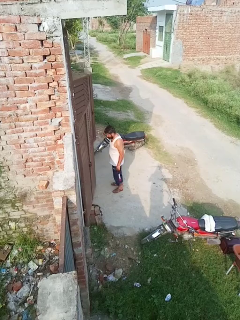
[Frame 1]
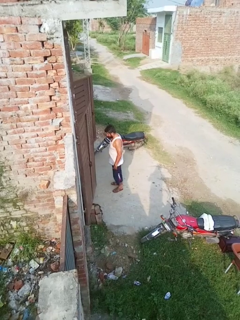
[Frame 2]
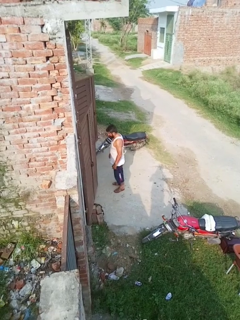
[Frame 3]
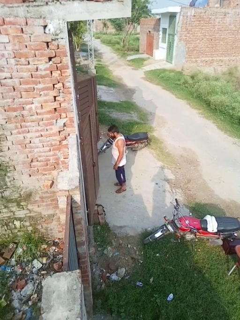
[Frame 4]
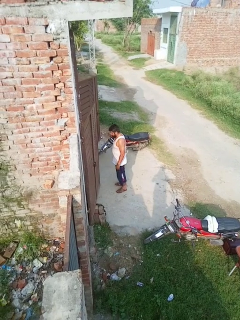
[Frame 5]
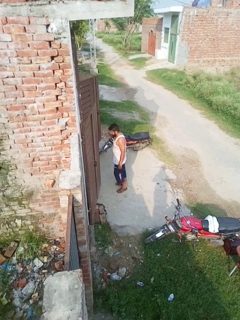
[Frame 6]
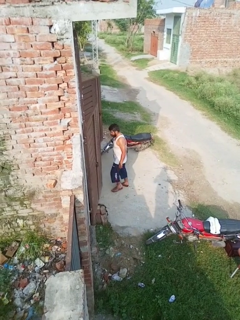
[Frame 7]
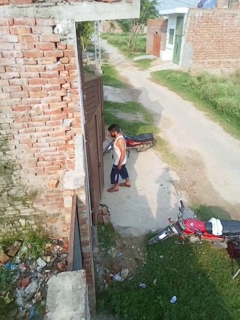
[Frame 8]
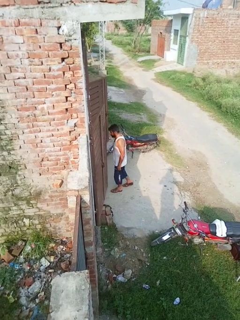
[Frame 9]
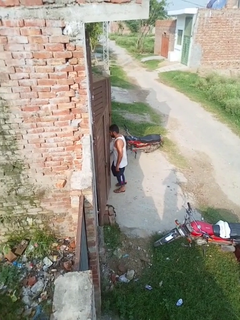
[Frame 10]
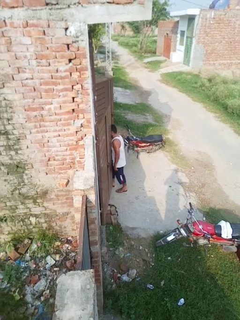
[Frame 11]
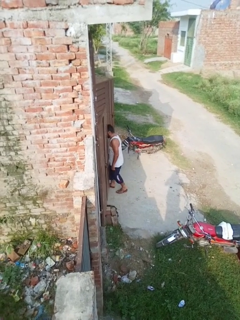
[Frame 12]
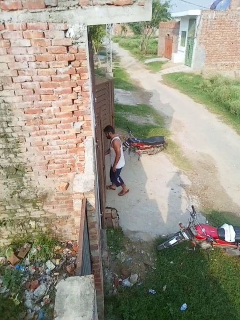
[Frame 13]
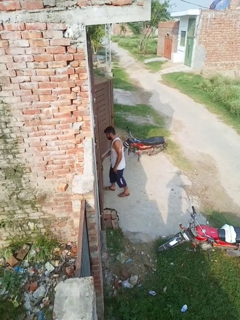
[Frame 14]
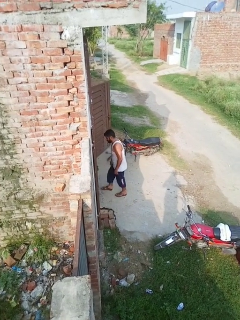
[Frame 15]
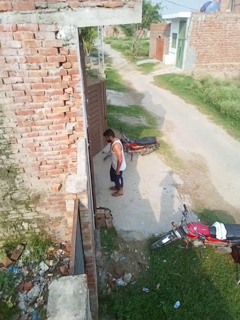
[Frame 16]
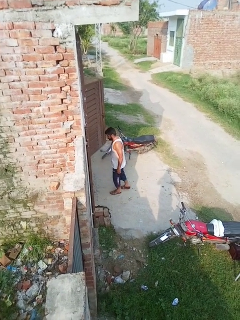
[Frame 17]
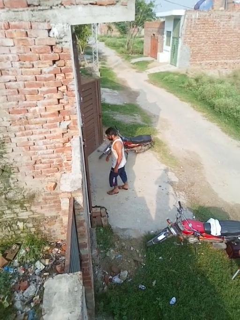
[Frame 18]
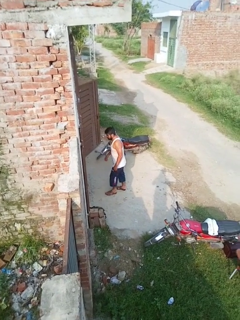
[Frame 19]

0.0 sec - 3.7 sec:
person bumps into wall

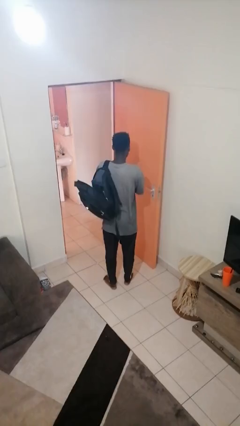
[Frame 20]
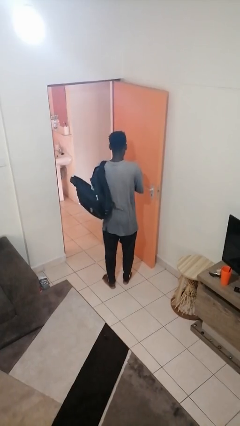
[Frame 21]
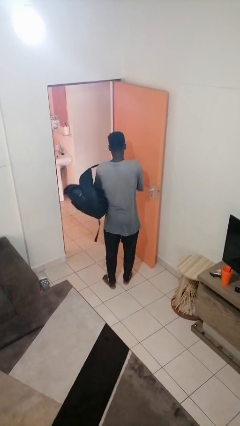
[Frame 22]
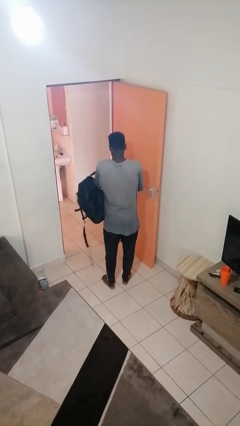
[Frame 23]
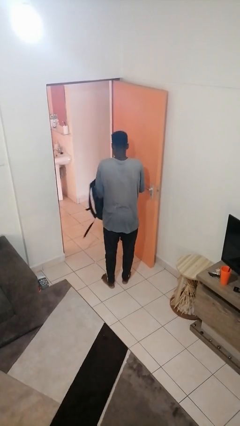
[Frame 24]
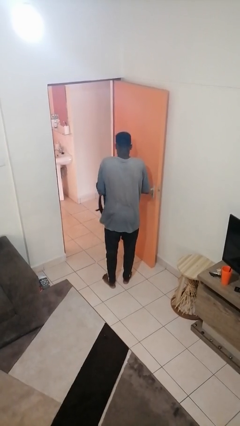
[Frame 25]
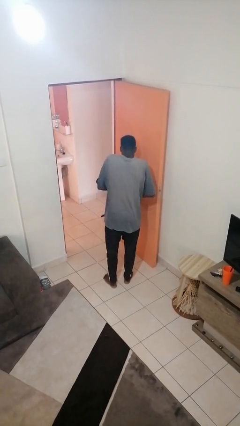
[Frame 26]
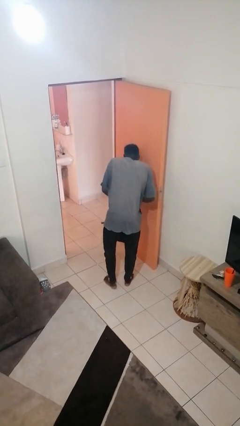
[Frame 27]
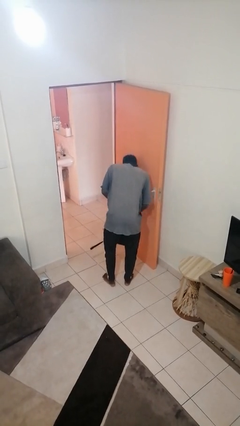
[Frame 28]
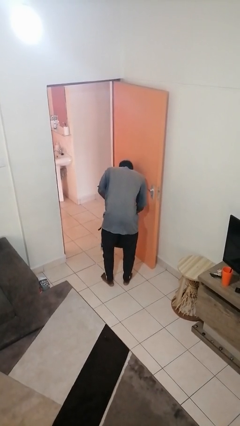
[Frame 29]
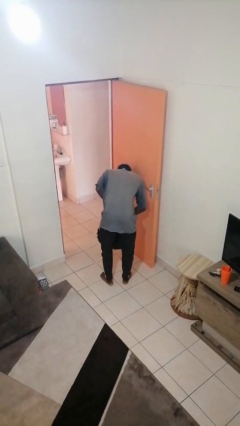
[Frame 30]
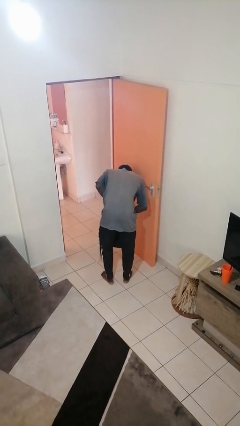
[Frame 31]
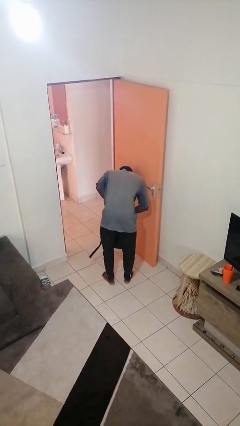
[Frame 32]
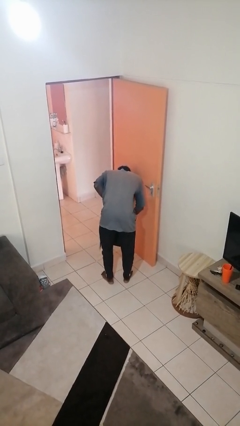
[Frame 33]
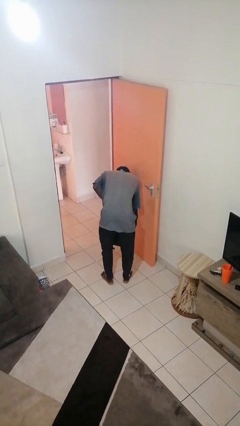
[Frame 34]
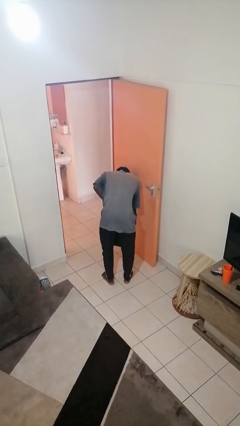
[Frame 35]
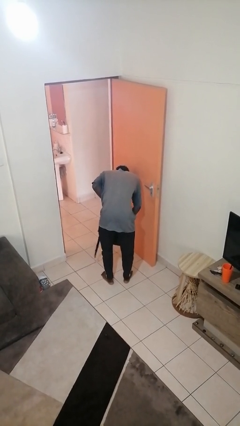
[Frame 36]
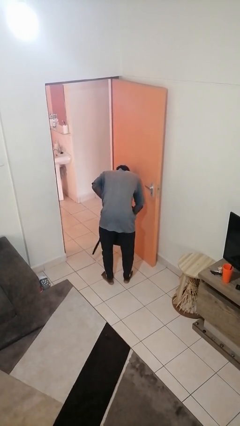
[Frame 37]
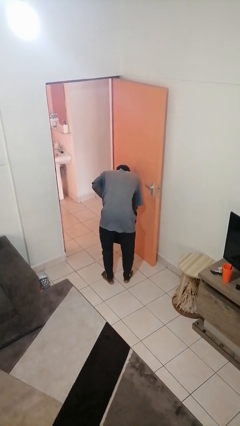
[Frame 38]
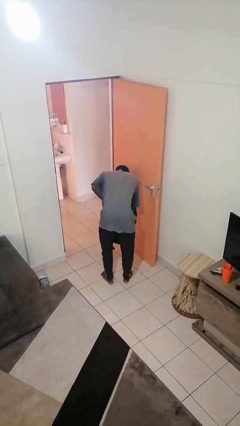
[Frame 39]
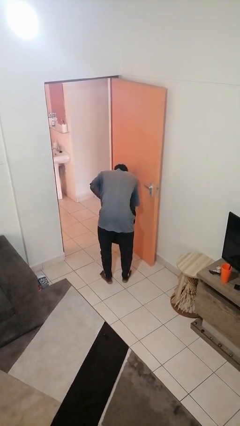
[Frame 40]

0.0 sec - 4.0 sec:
person searches in backpack

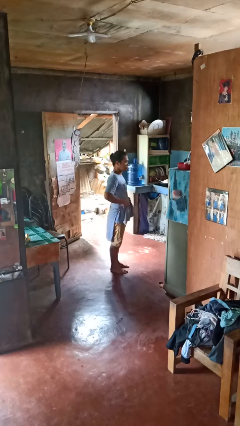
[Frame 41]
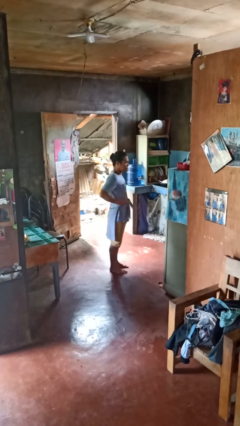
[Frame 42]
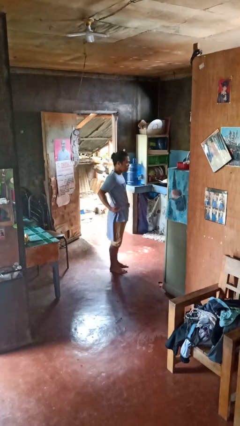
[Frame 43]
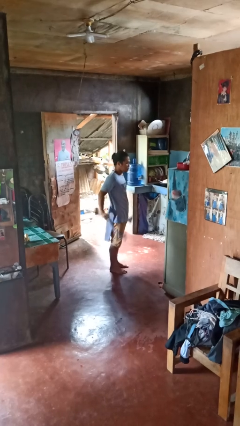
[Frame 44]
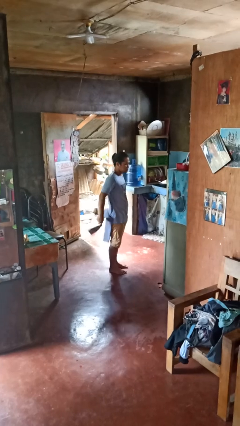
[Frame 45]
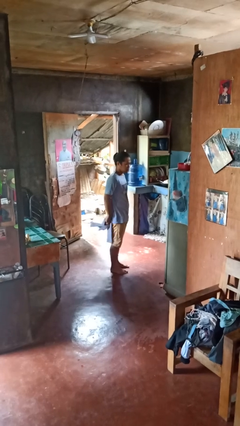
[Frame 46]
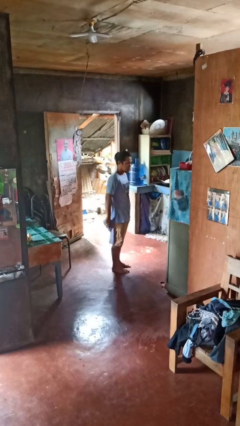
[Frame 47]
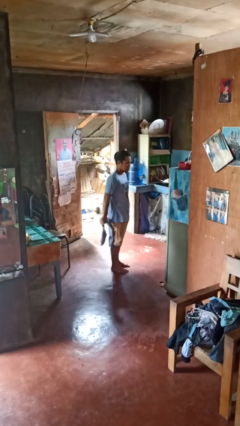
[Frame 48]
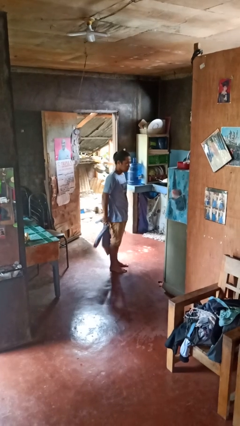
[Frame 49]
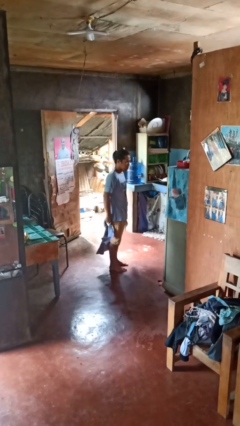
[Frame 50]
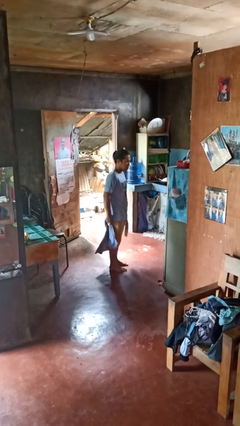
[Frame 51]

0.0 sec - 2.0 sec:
person unties jacket around waist

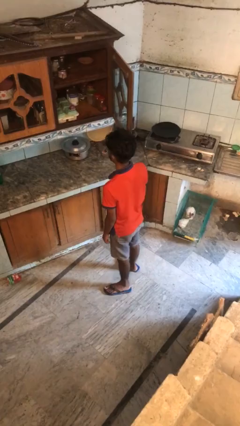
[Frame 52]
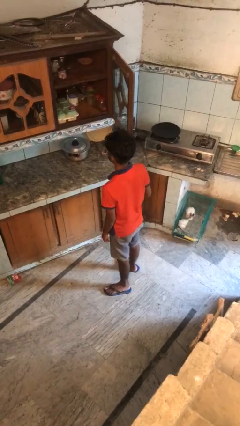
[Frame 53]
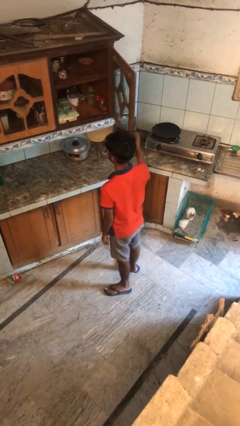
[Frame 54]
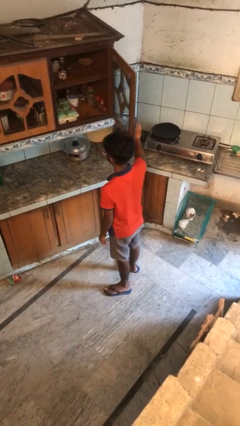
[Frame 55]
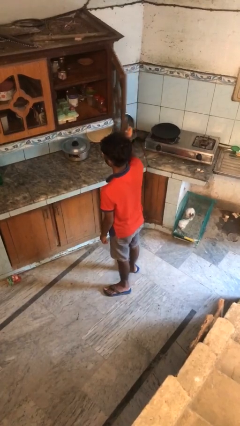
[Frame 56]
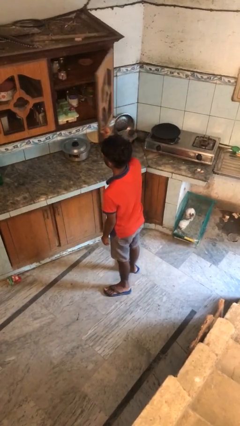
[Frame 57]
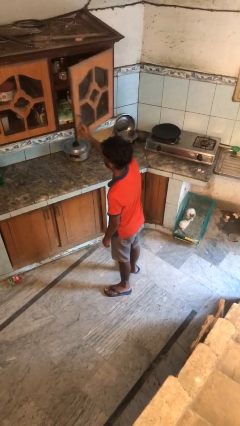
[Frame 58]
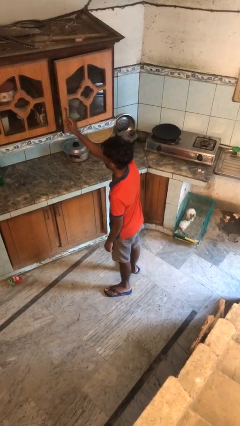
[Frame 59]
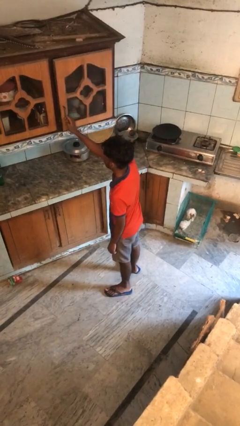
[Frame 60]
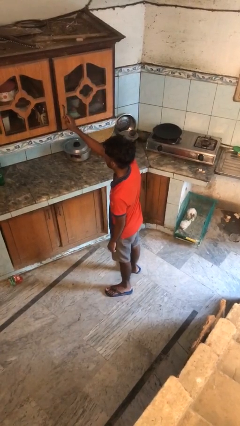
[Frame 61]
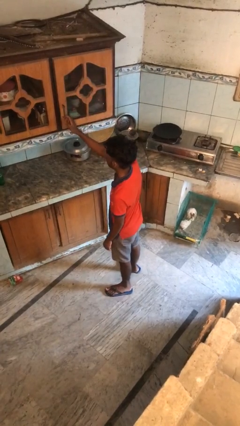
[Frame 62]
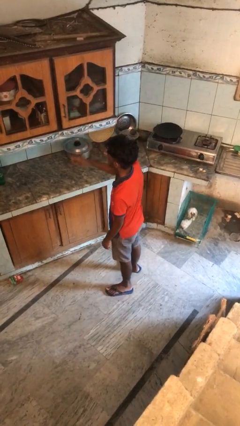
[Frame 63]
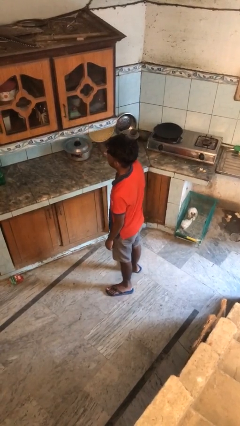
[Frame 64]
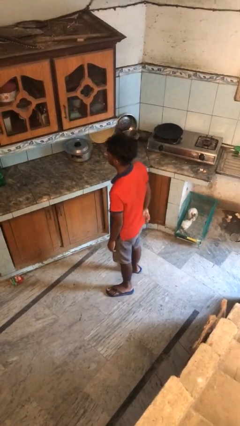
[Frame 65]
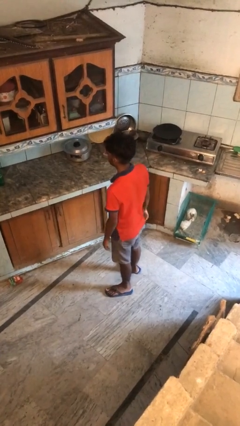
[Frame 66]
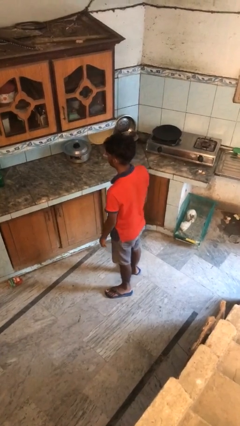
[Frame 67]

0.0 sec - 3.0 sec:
person closes cabinet

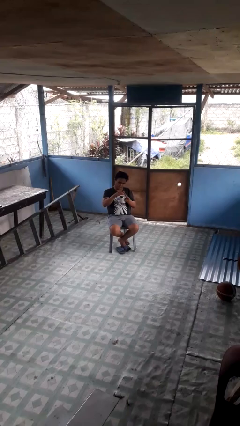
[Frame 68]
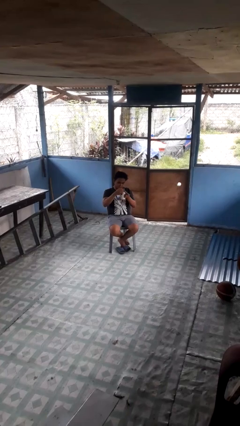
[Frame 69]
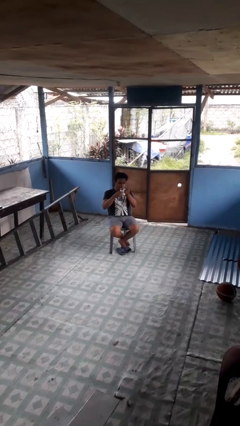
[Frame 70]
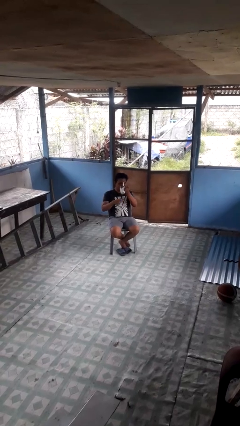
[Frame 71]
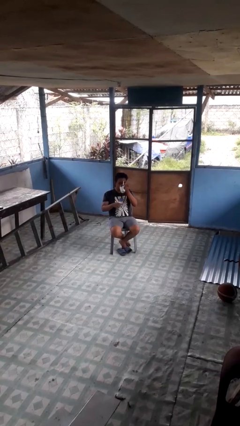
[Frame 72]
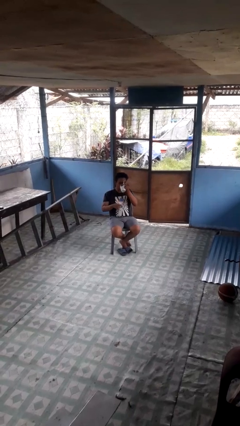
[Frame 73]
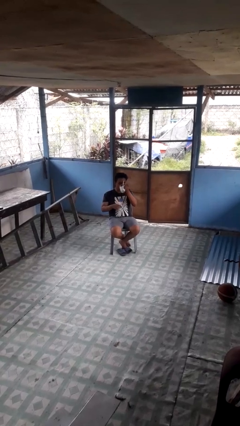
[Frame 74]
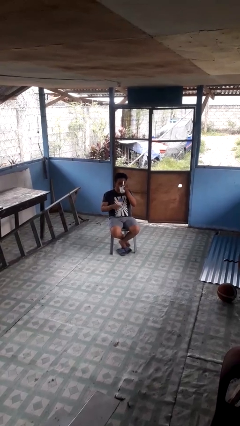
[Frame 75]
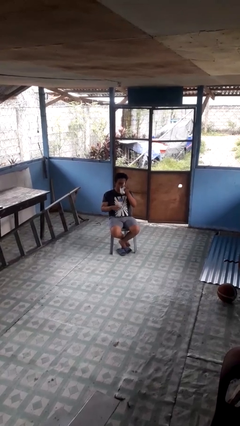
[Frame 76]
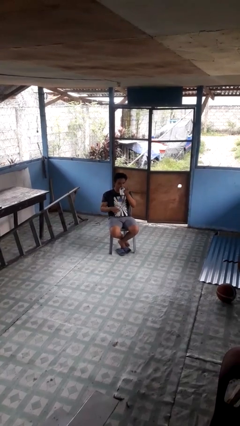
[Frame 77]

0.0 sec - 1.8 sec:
person drinks from mug

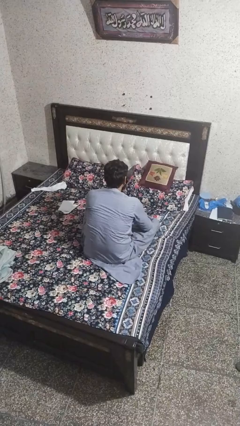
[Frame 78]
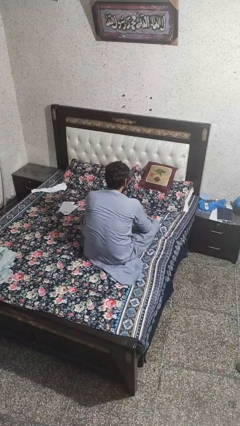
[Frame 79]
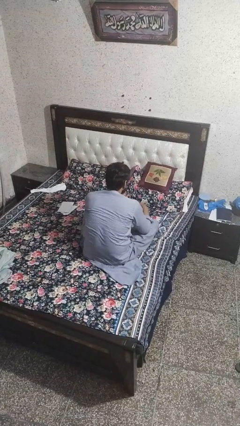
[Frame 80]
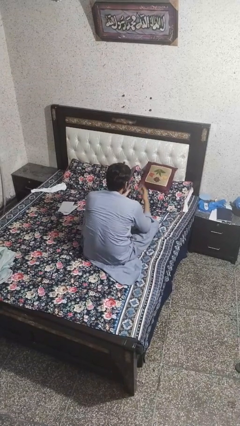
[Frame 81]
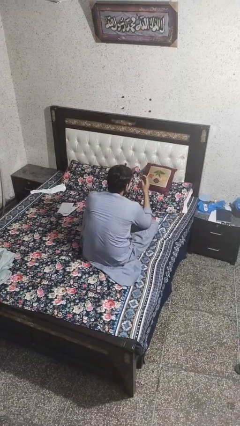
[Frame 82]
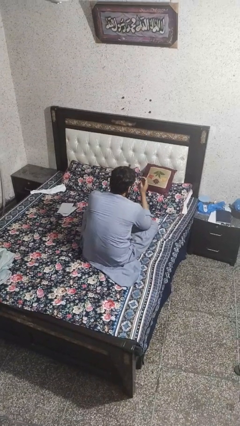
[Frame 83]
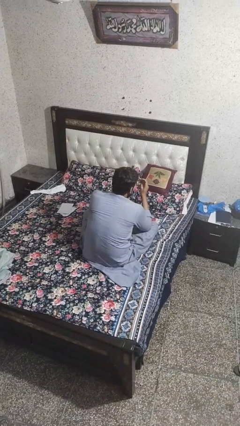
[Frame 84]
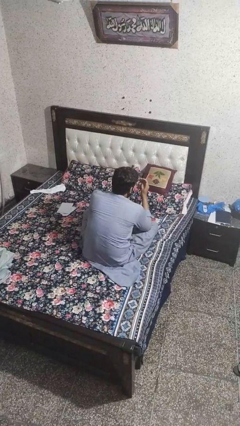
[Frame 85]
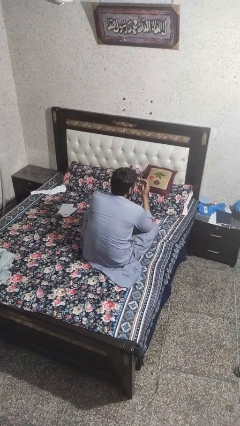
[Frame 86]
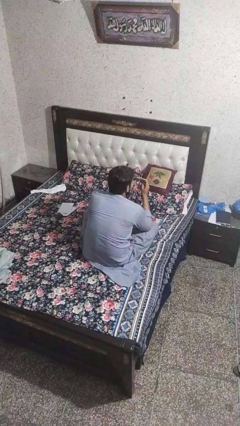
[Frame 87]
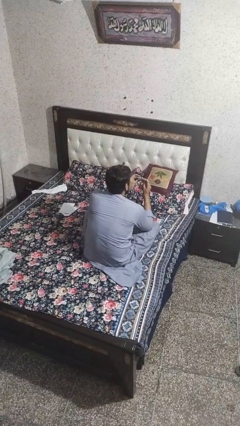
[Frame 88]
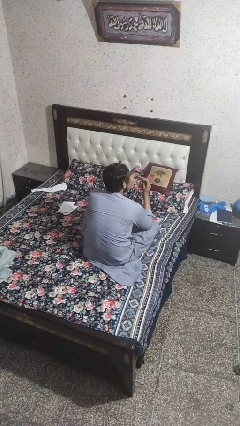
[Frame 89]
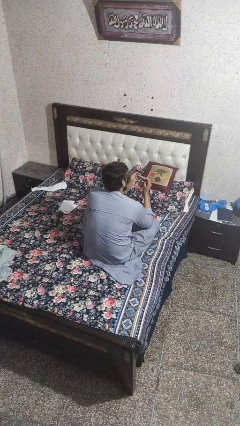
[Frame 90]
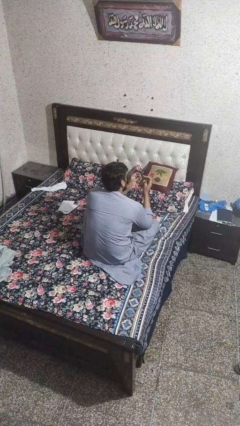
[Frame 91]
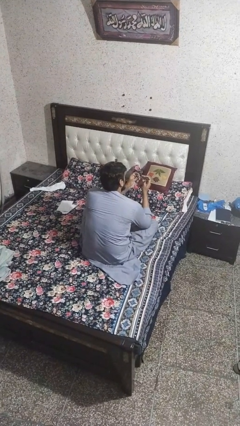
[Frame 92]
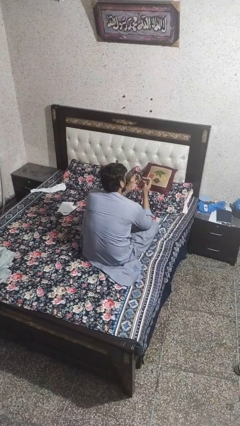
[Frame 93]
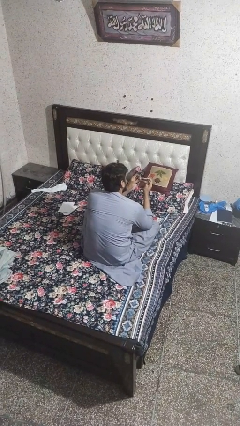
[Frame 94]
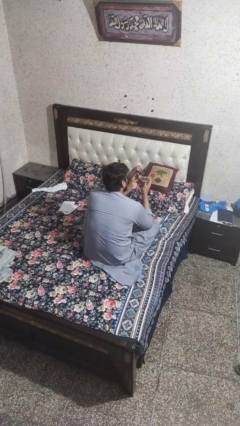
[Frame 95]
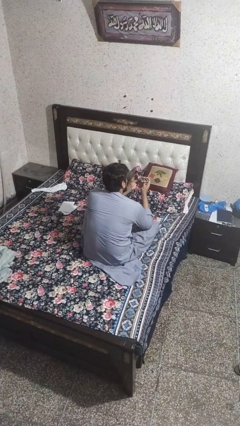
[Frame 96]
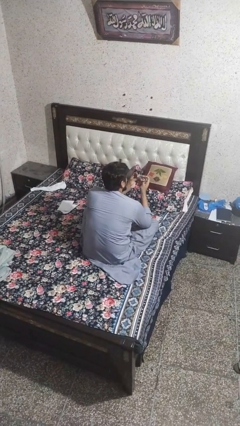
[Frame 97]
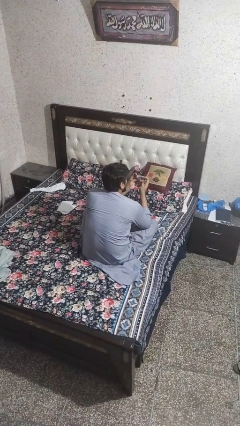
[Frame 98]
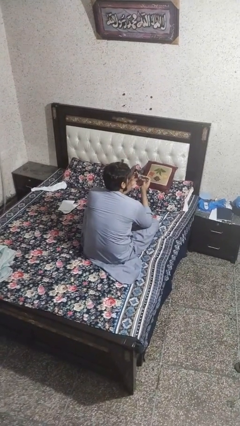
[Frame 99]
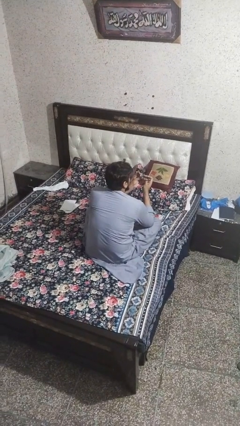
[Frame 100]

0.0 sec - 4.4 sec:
person clips fingernails
